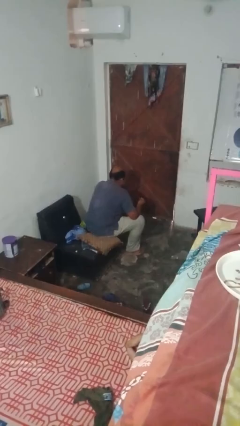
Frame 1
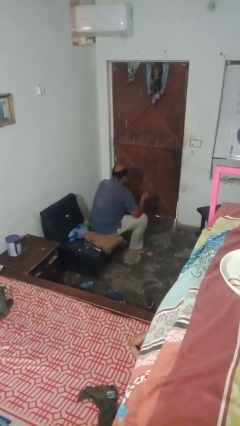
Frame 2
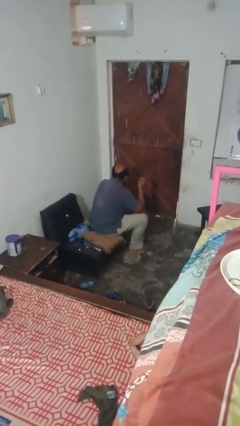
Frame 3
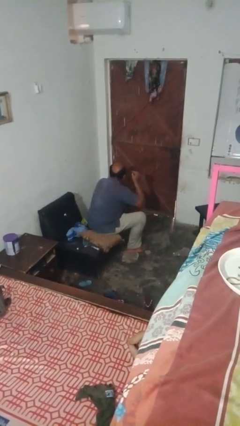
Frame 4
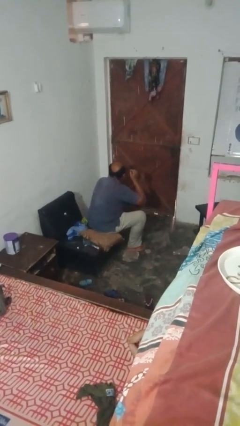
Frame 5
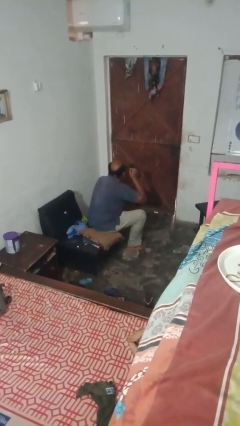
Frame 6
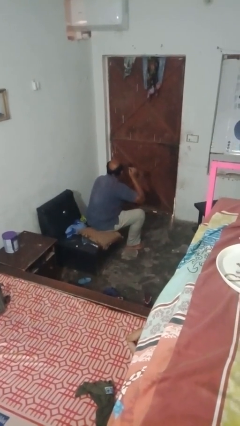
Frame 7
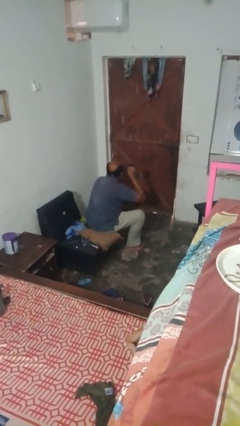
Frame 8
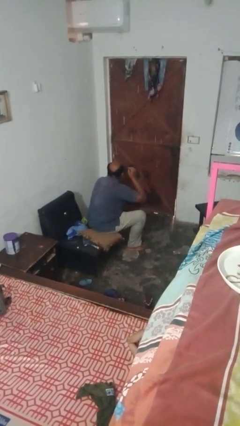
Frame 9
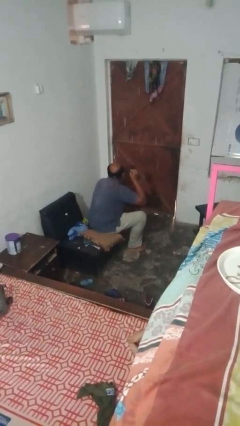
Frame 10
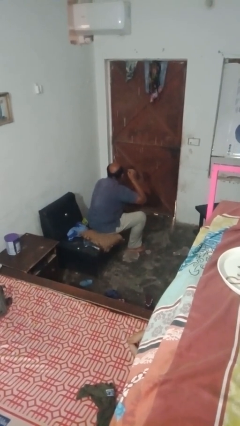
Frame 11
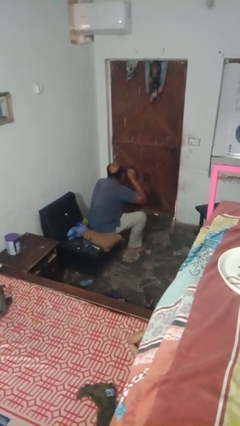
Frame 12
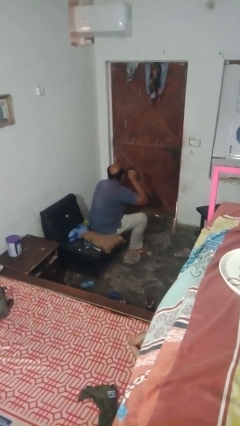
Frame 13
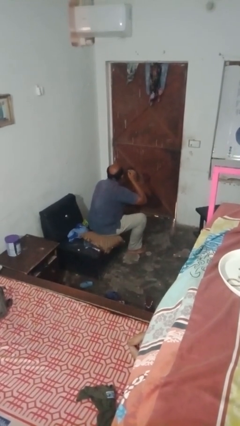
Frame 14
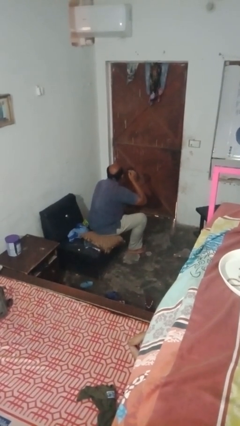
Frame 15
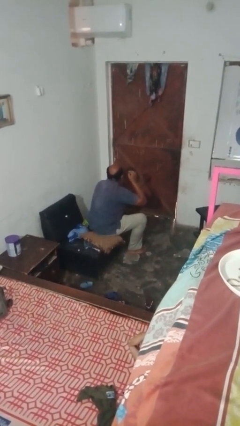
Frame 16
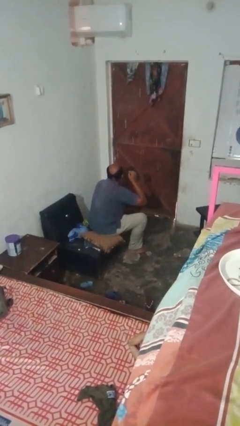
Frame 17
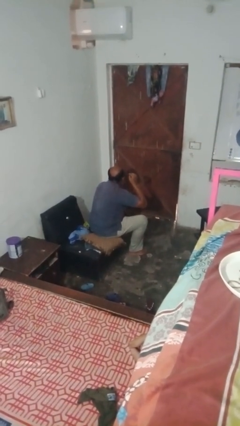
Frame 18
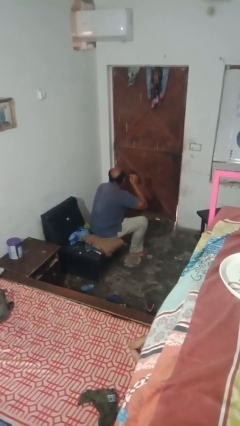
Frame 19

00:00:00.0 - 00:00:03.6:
person applies eye makeup

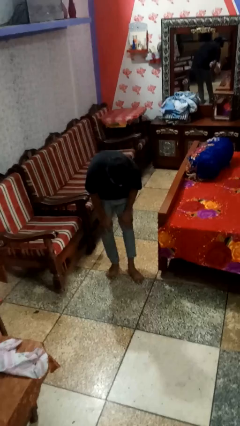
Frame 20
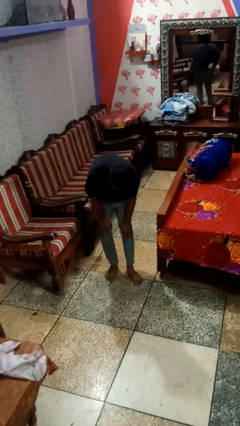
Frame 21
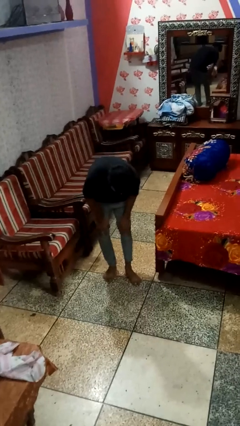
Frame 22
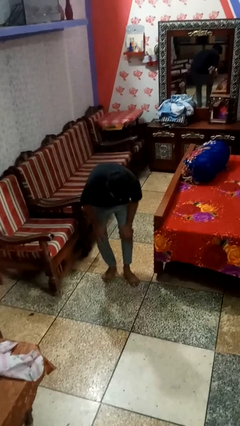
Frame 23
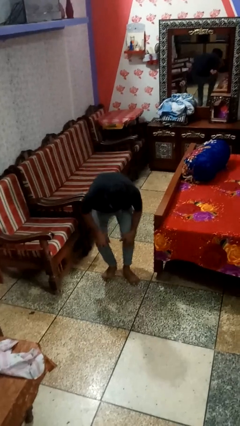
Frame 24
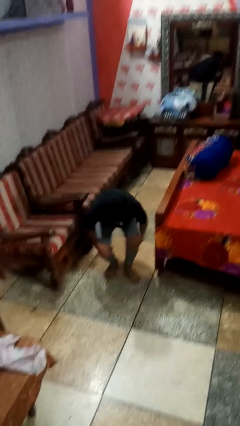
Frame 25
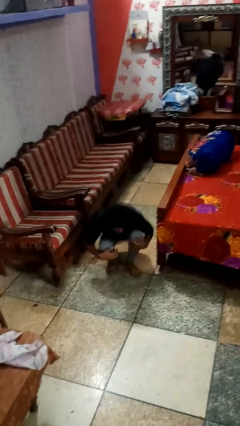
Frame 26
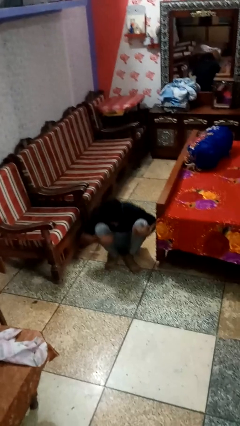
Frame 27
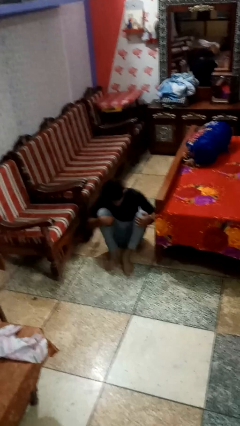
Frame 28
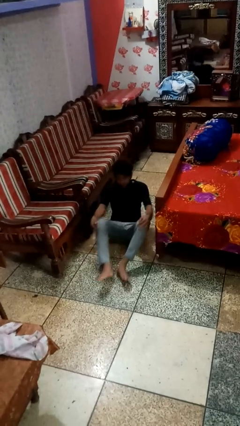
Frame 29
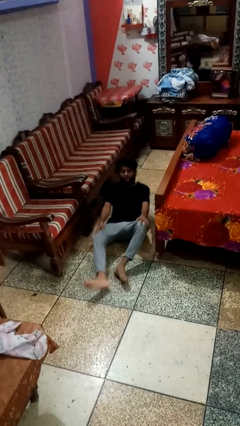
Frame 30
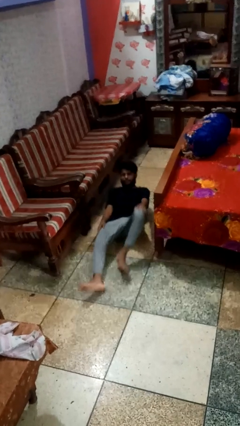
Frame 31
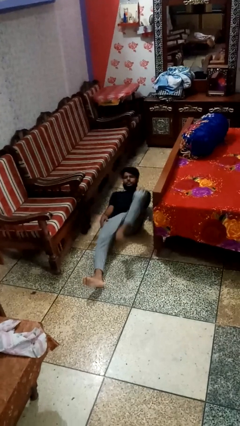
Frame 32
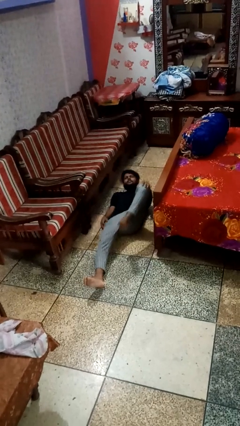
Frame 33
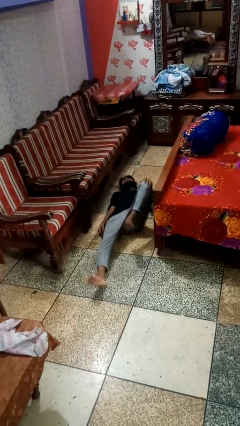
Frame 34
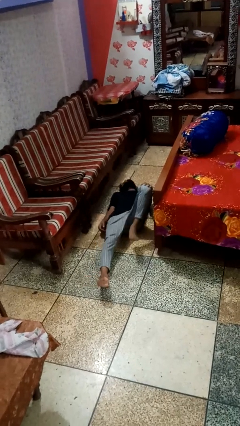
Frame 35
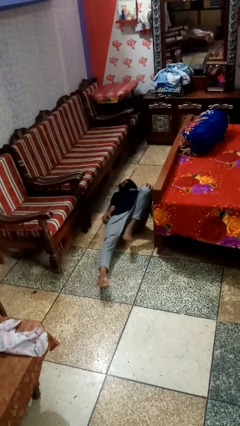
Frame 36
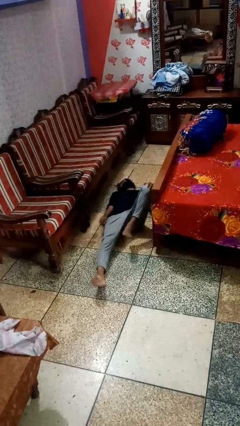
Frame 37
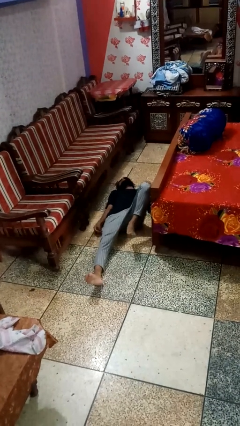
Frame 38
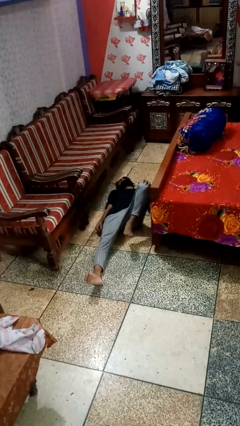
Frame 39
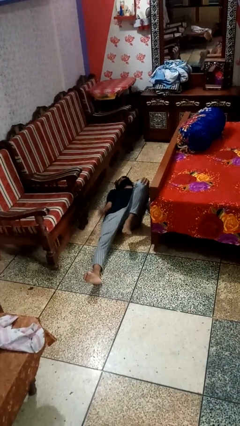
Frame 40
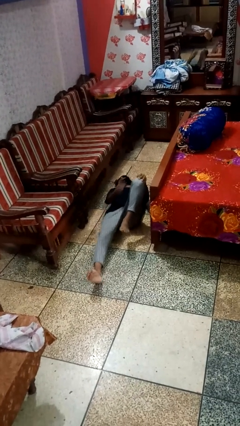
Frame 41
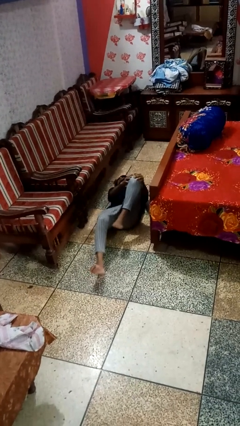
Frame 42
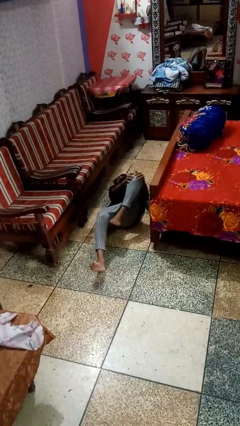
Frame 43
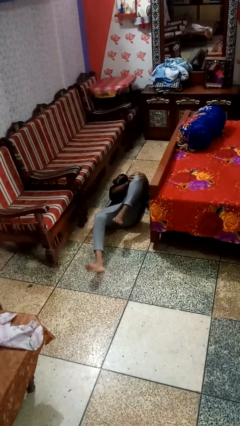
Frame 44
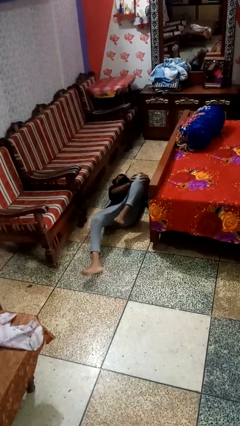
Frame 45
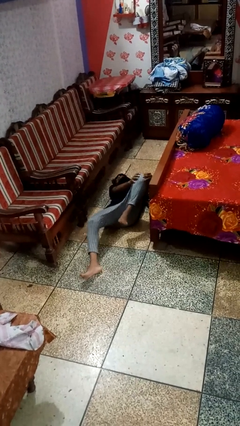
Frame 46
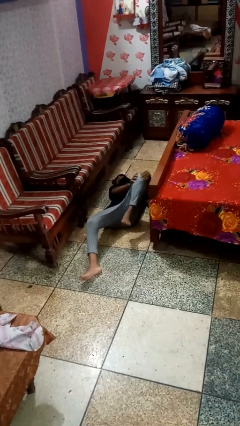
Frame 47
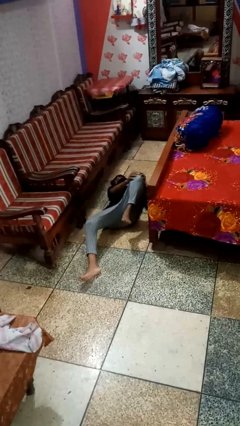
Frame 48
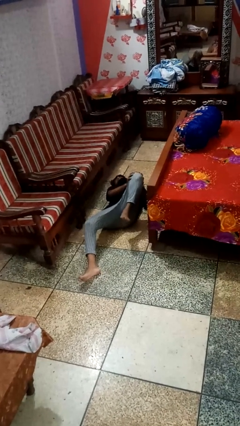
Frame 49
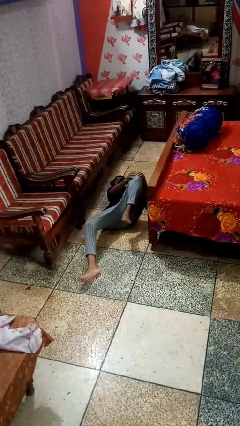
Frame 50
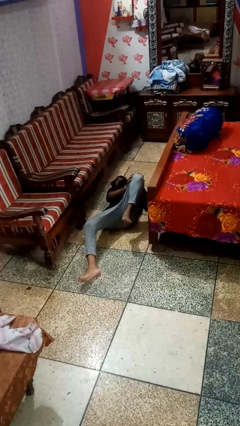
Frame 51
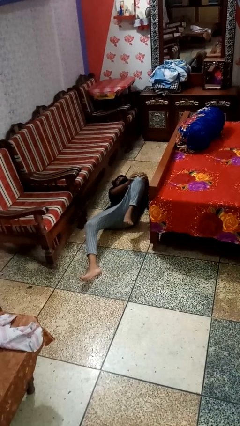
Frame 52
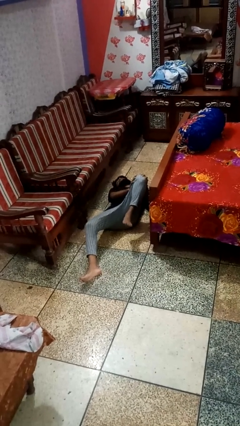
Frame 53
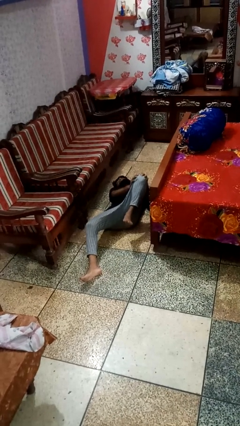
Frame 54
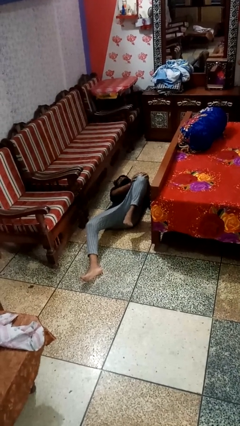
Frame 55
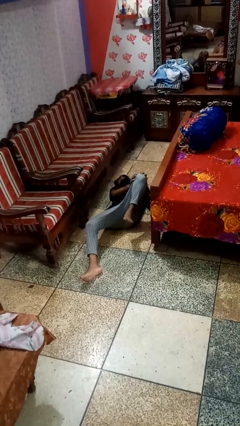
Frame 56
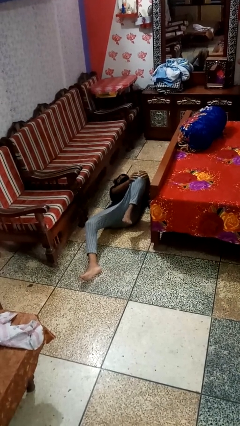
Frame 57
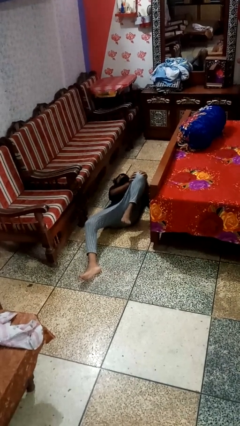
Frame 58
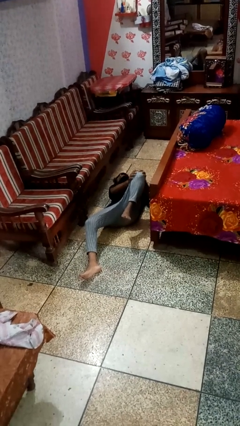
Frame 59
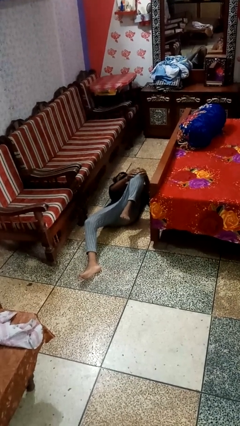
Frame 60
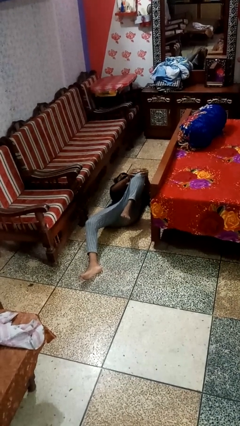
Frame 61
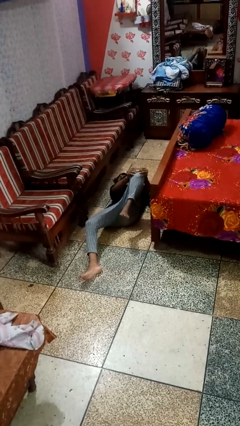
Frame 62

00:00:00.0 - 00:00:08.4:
person lies down on floor

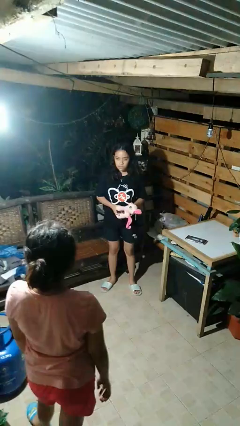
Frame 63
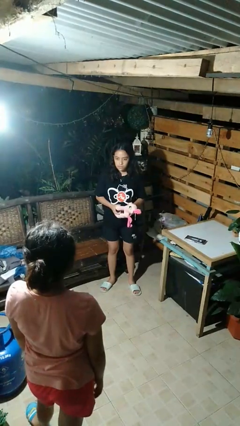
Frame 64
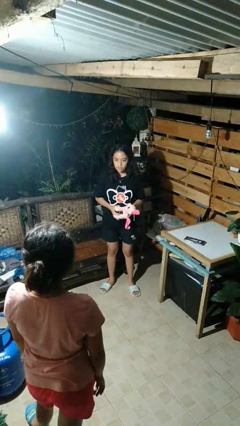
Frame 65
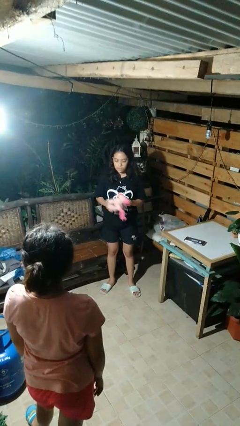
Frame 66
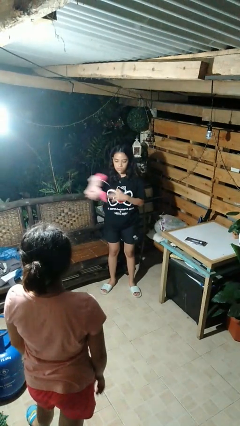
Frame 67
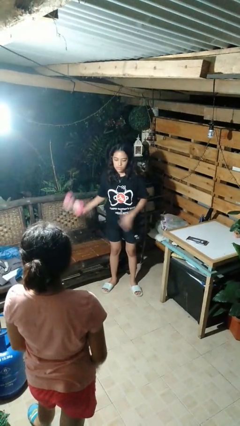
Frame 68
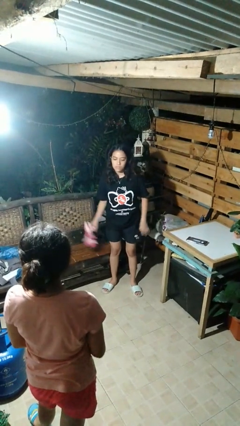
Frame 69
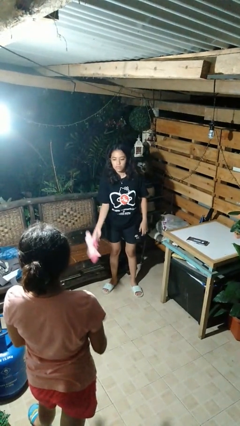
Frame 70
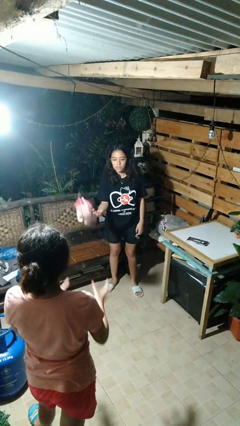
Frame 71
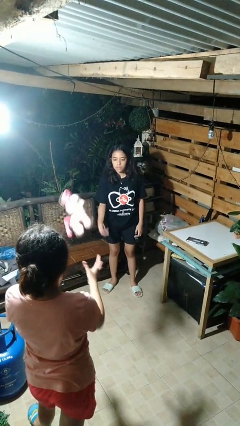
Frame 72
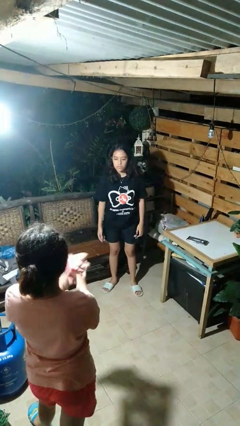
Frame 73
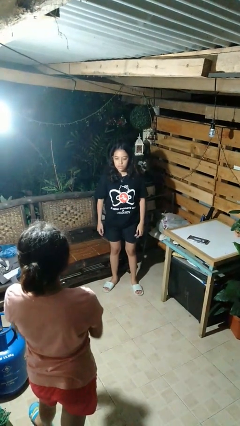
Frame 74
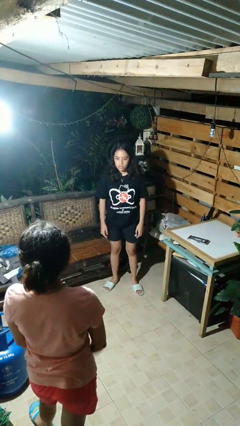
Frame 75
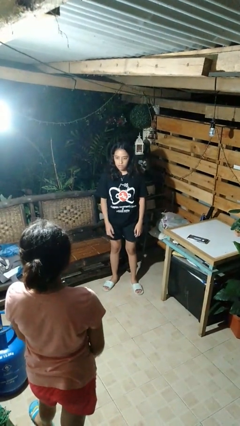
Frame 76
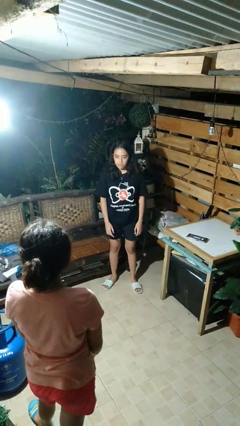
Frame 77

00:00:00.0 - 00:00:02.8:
person throws object to person

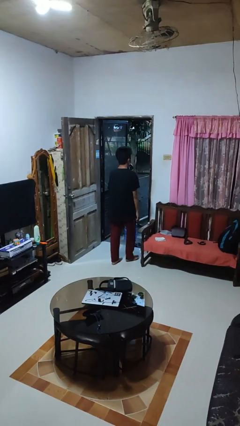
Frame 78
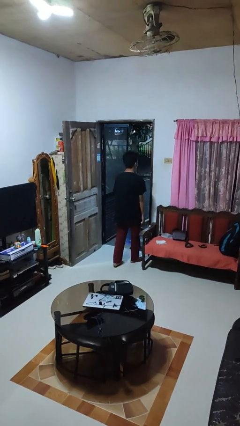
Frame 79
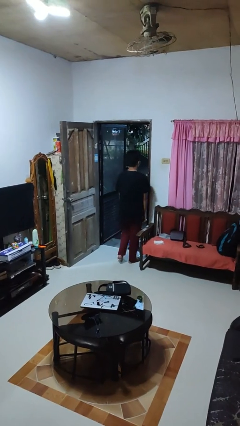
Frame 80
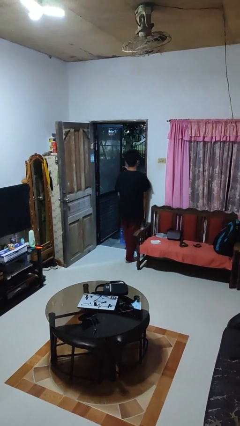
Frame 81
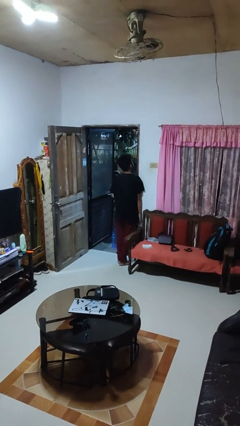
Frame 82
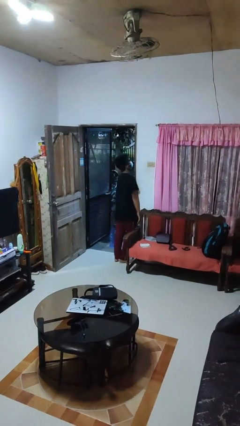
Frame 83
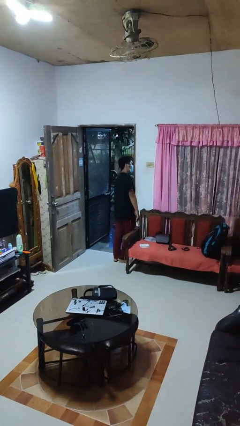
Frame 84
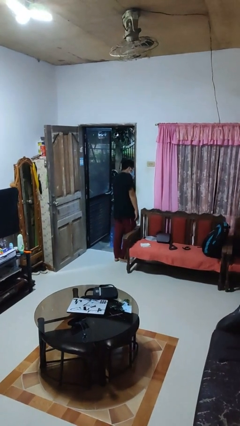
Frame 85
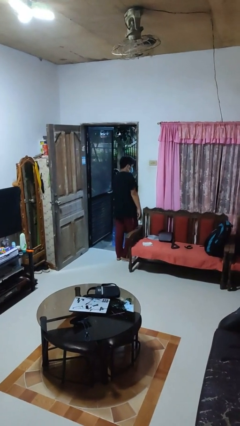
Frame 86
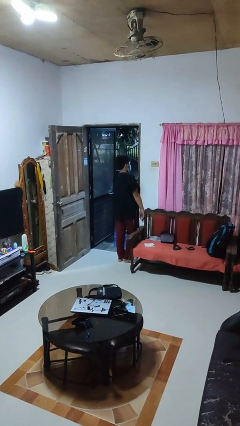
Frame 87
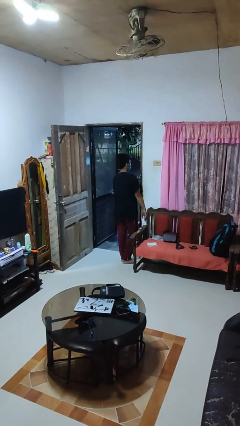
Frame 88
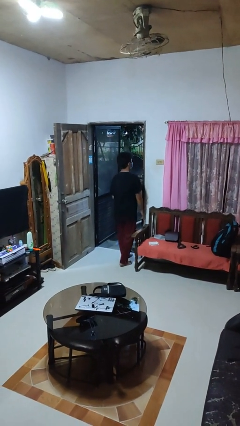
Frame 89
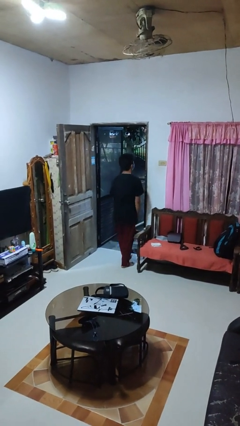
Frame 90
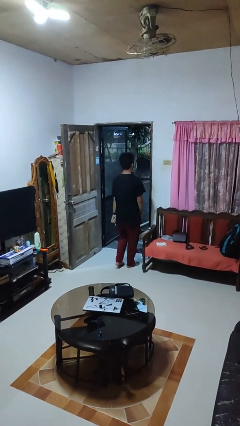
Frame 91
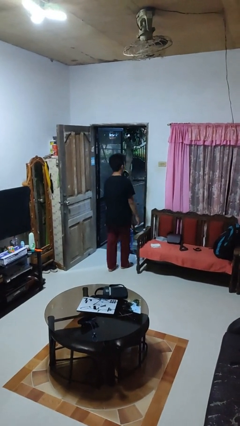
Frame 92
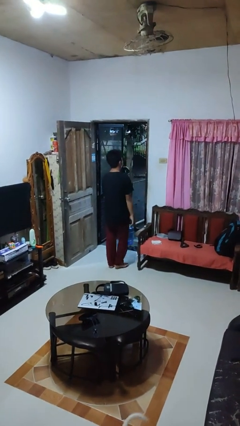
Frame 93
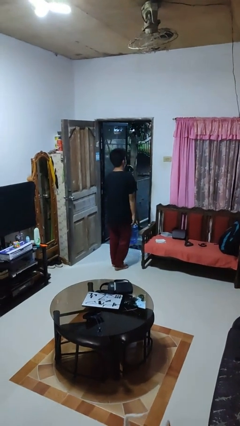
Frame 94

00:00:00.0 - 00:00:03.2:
person bumps into wall
